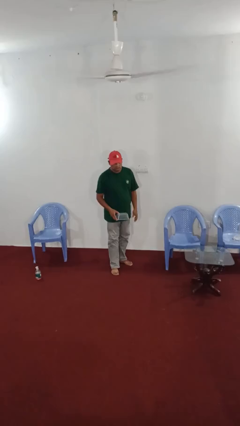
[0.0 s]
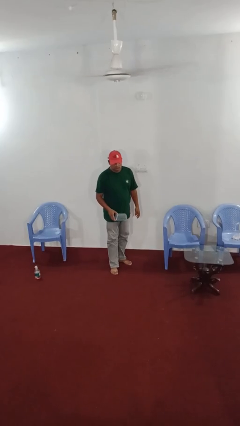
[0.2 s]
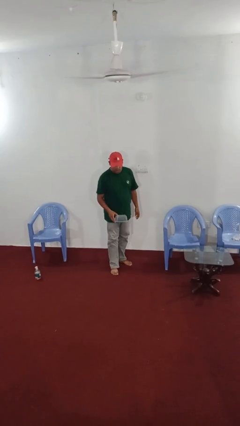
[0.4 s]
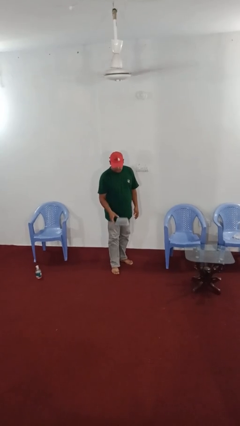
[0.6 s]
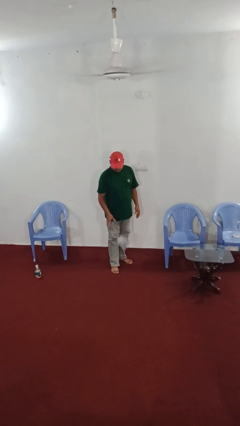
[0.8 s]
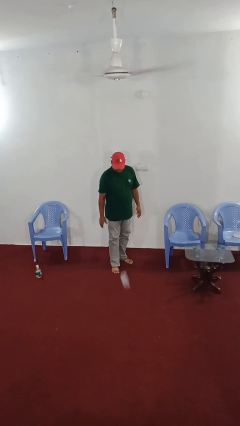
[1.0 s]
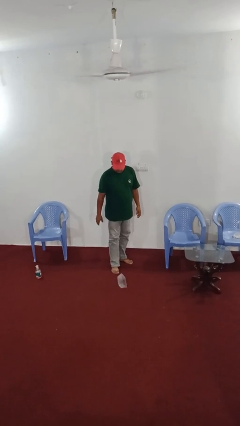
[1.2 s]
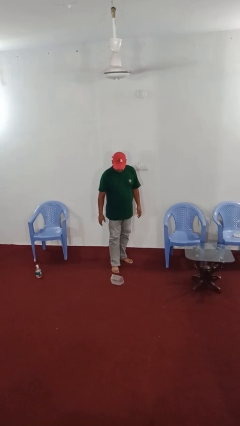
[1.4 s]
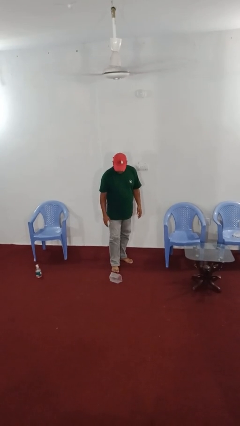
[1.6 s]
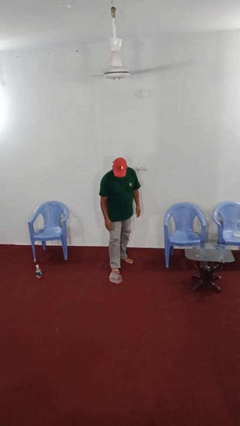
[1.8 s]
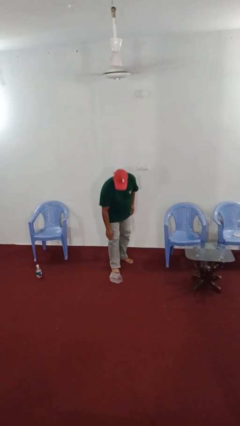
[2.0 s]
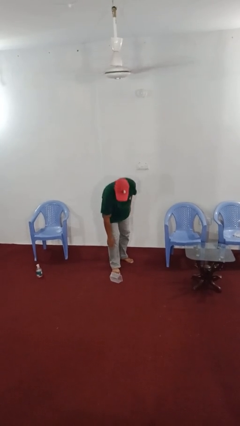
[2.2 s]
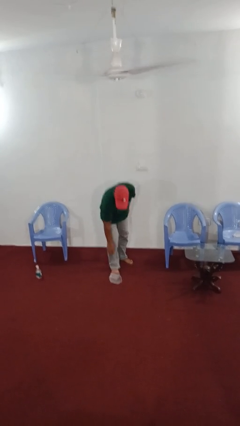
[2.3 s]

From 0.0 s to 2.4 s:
person throws object to ground

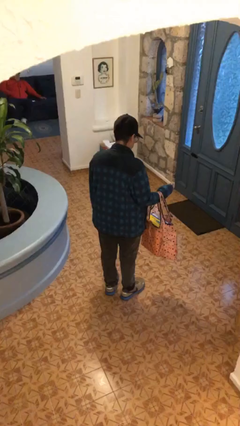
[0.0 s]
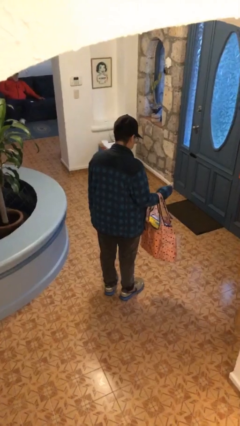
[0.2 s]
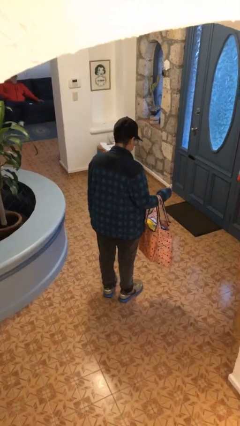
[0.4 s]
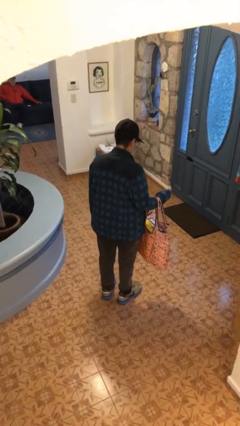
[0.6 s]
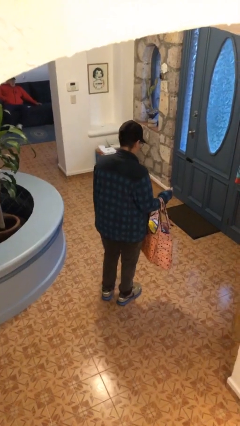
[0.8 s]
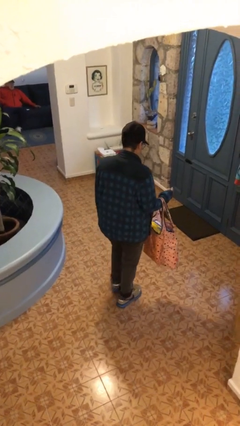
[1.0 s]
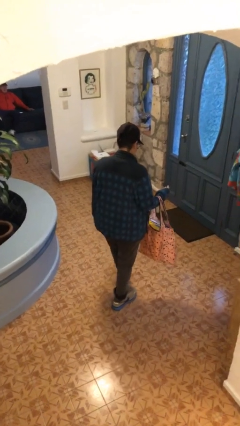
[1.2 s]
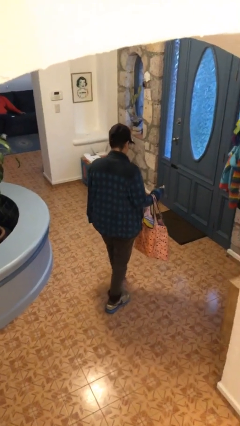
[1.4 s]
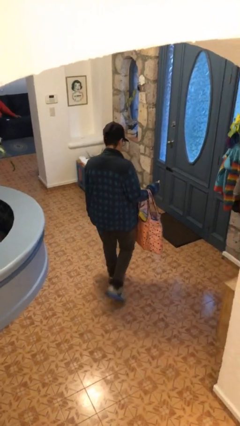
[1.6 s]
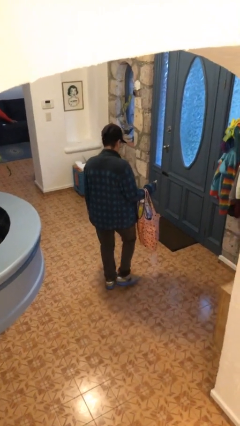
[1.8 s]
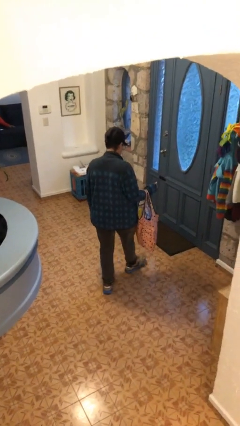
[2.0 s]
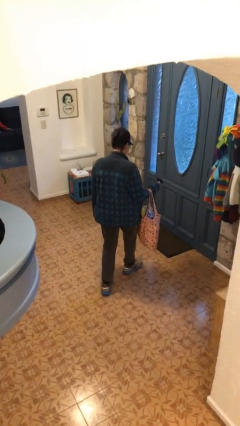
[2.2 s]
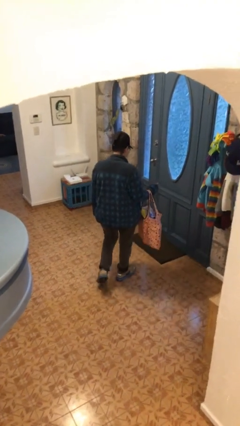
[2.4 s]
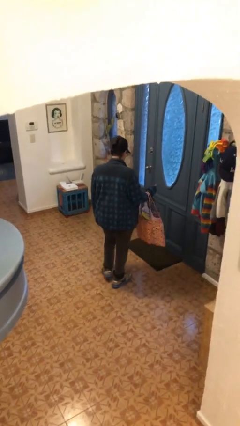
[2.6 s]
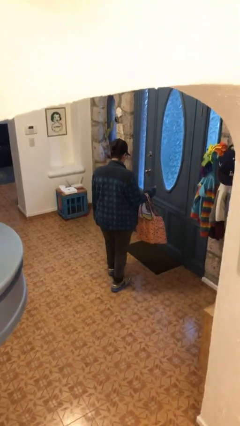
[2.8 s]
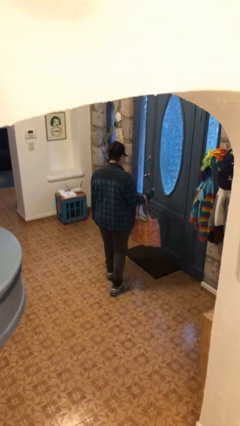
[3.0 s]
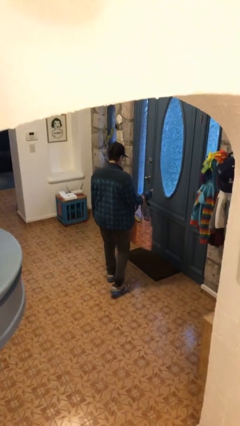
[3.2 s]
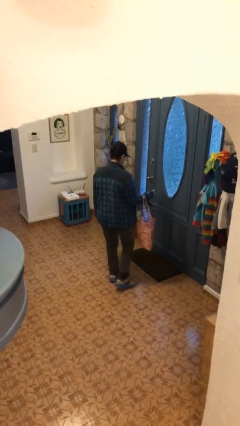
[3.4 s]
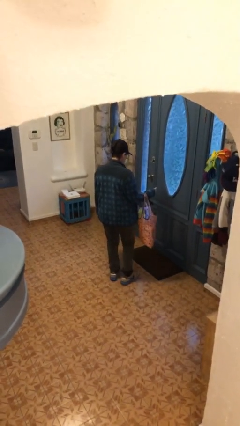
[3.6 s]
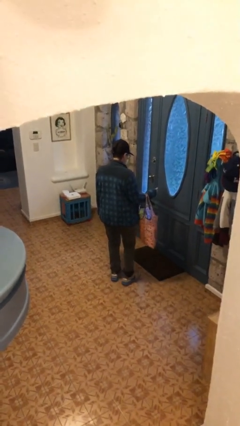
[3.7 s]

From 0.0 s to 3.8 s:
person carries groceries

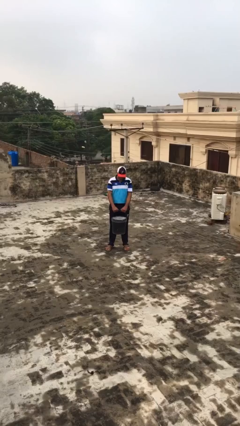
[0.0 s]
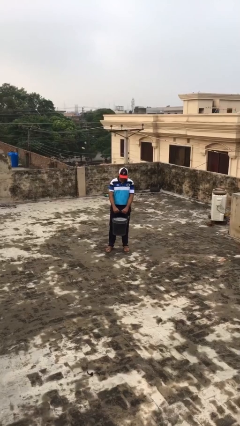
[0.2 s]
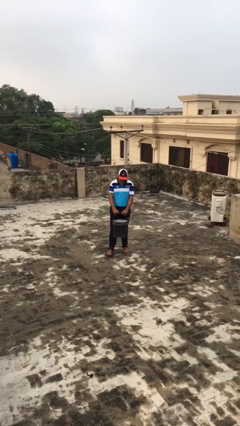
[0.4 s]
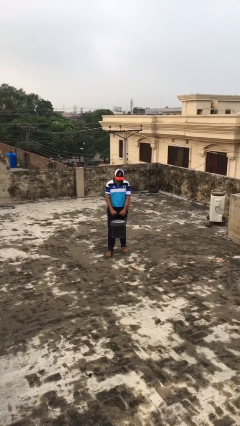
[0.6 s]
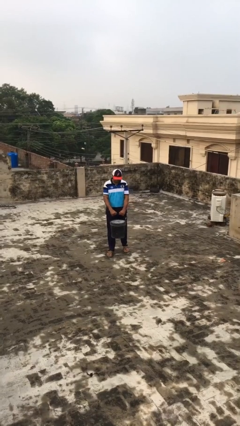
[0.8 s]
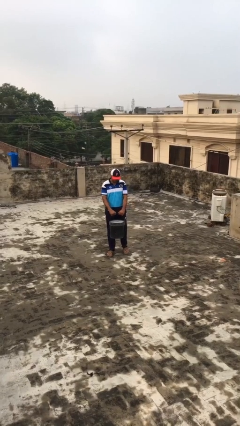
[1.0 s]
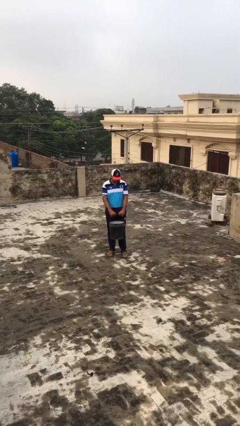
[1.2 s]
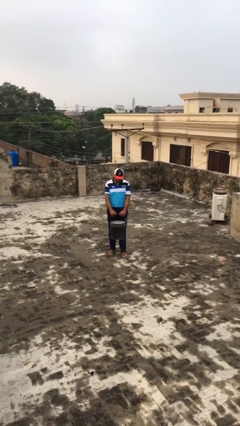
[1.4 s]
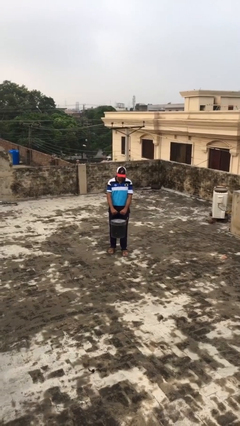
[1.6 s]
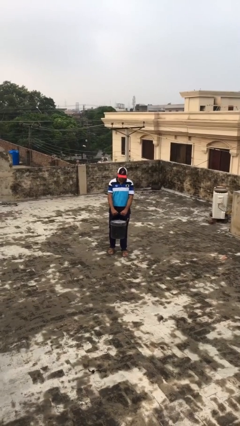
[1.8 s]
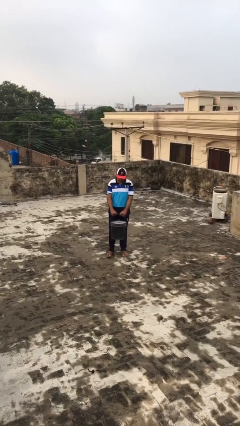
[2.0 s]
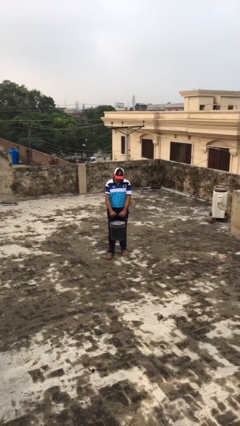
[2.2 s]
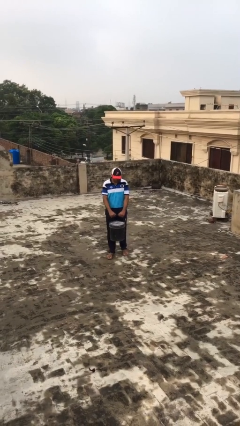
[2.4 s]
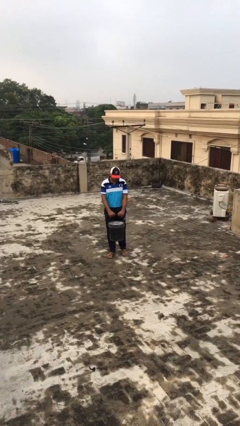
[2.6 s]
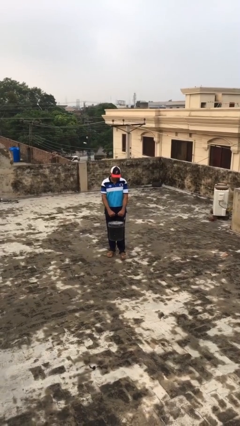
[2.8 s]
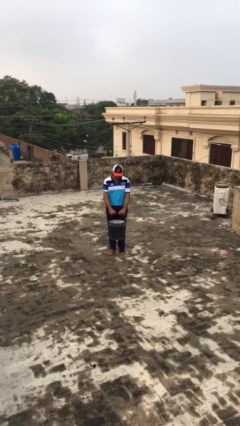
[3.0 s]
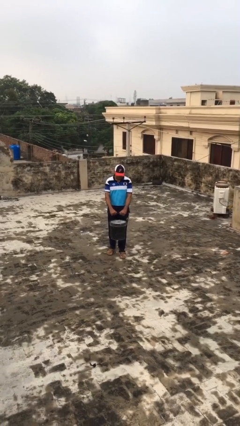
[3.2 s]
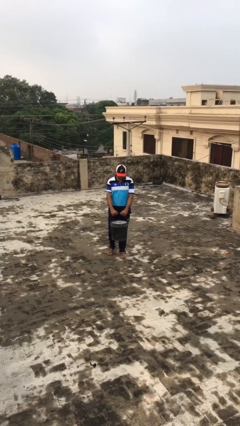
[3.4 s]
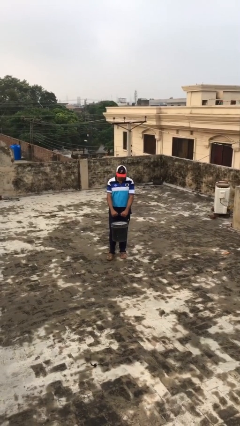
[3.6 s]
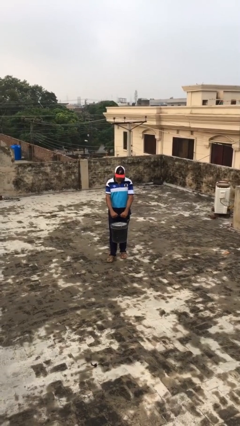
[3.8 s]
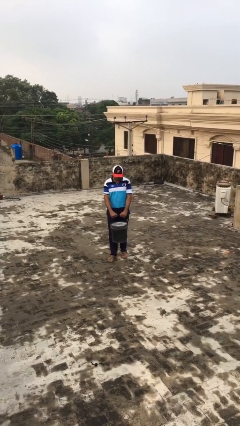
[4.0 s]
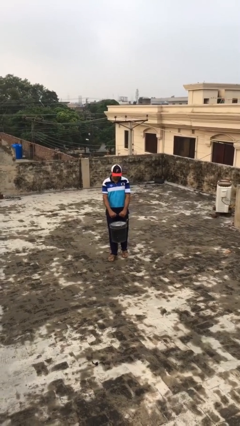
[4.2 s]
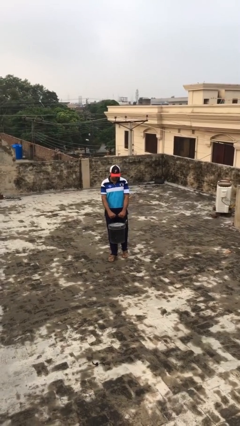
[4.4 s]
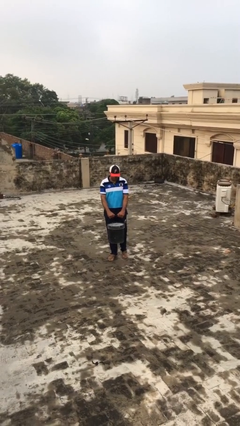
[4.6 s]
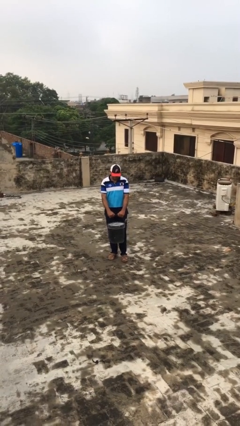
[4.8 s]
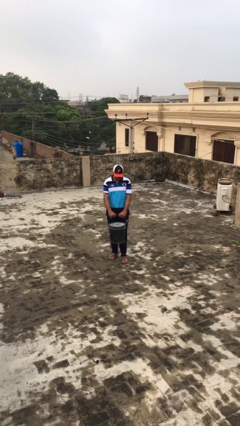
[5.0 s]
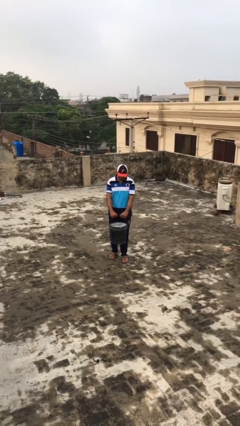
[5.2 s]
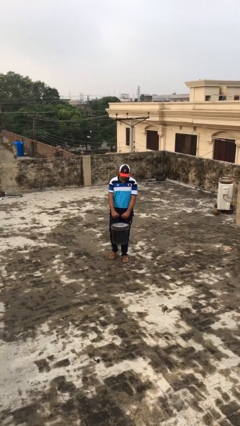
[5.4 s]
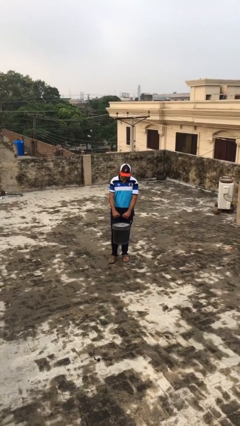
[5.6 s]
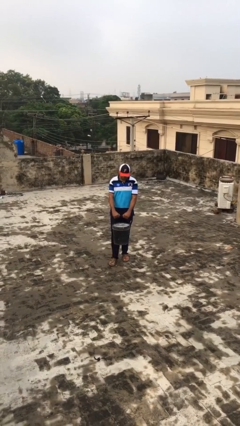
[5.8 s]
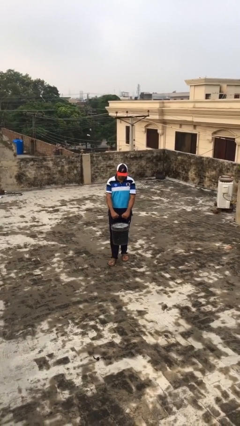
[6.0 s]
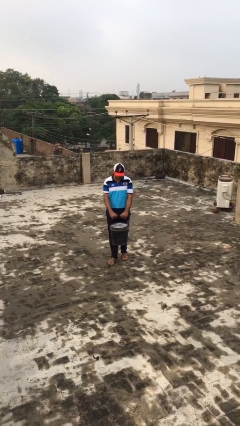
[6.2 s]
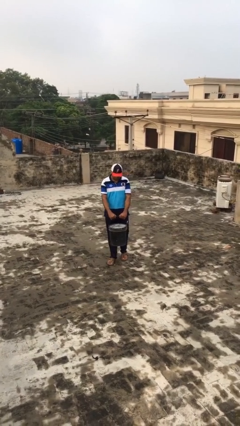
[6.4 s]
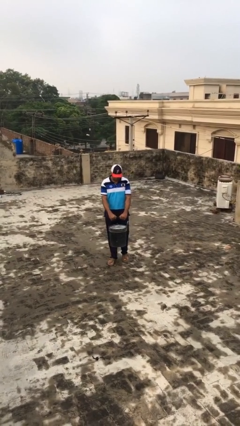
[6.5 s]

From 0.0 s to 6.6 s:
person carries heavy object

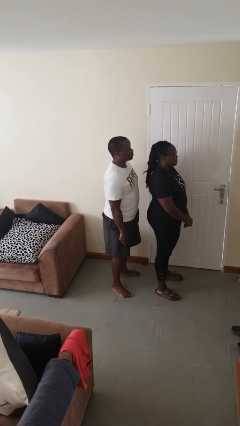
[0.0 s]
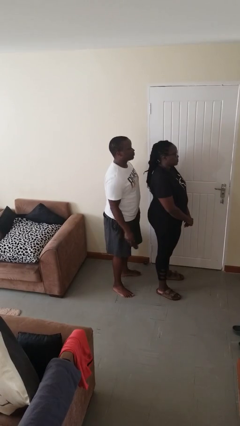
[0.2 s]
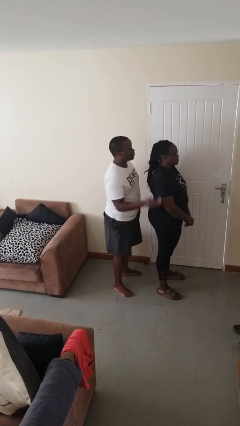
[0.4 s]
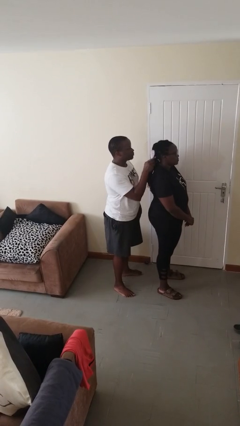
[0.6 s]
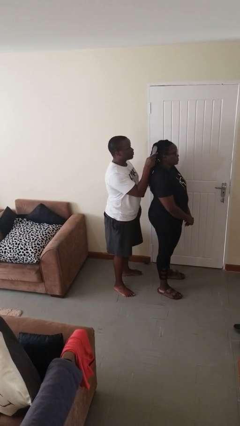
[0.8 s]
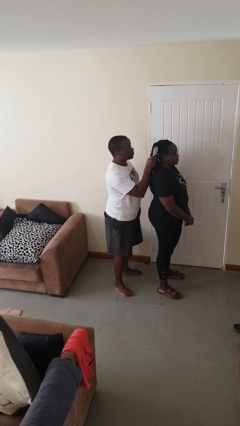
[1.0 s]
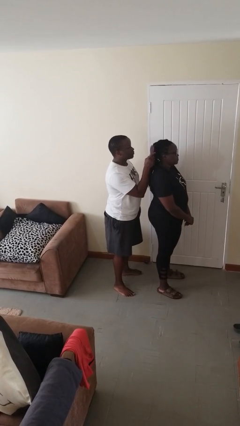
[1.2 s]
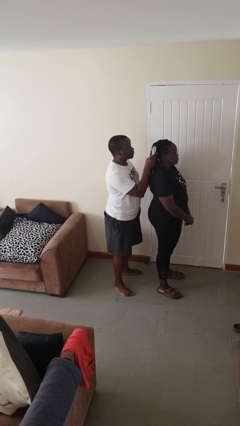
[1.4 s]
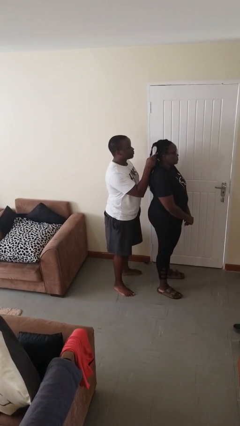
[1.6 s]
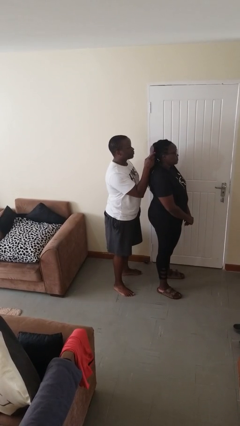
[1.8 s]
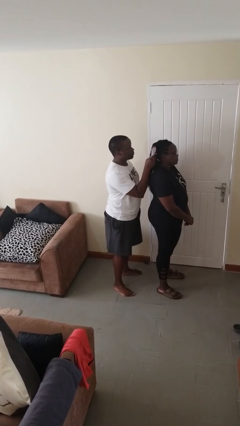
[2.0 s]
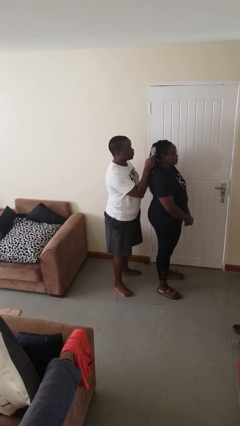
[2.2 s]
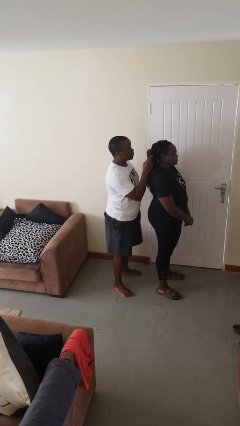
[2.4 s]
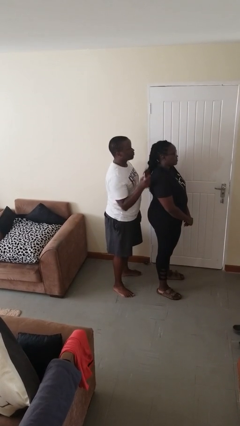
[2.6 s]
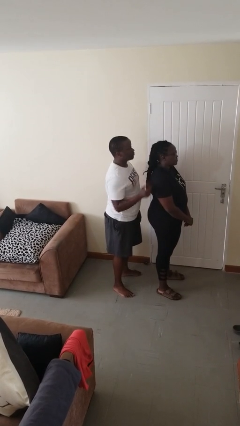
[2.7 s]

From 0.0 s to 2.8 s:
person brushes hair of person

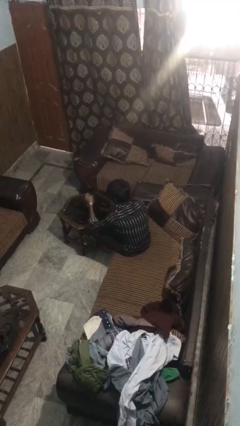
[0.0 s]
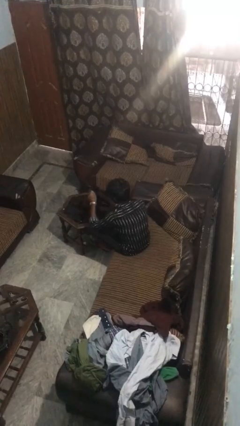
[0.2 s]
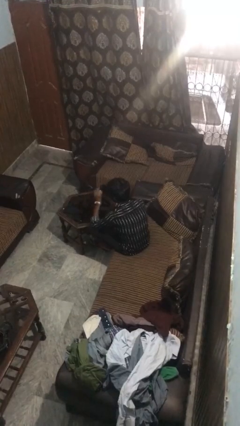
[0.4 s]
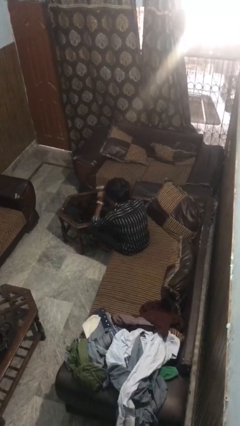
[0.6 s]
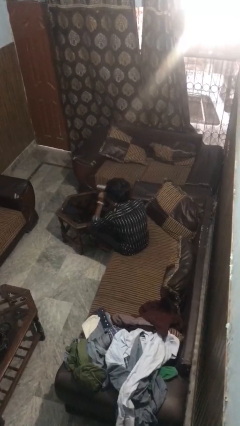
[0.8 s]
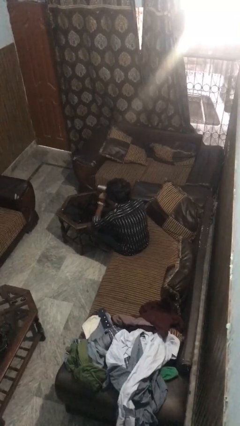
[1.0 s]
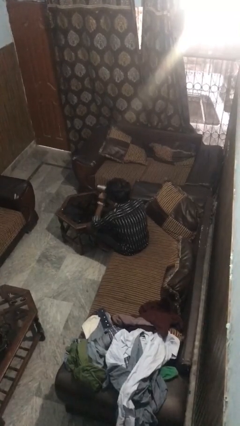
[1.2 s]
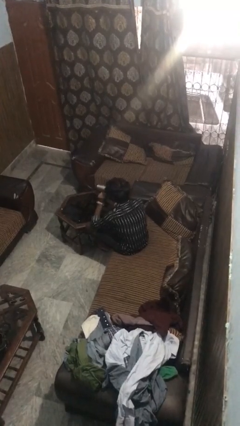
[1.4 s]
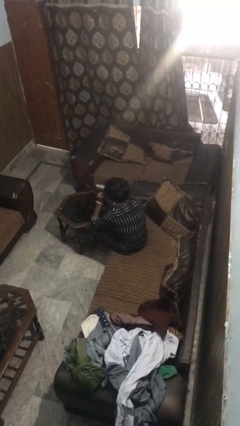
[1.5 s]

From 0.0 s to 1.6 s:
person drinks from mug

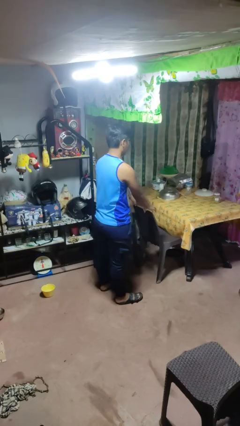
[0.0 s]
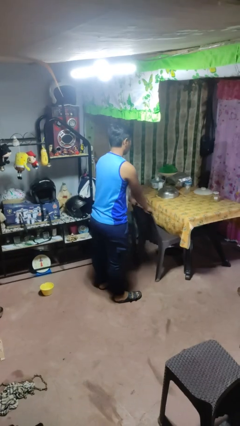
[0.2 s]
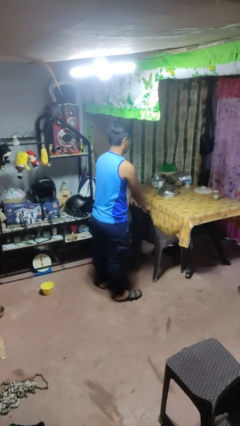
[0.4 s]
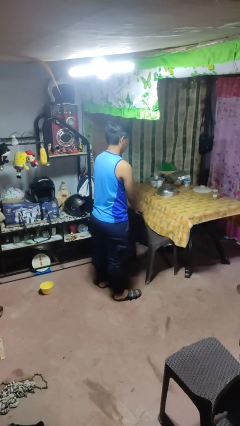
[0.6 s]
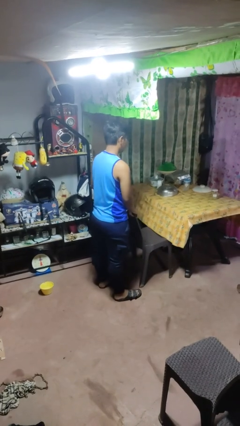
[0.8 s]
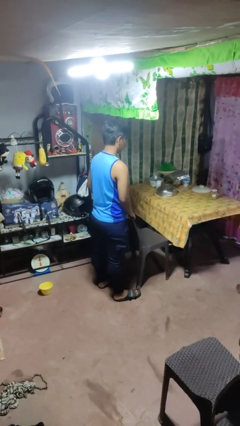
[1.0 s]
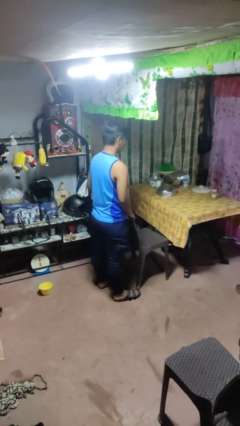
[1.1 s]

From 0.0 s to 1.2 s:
person pulls out chair
